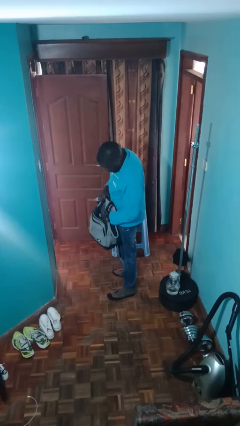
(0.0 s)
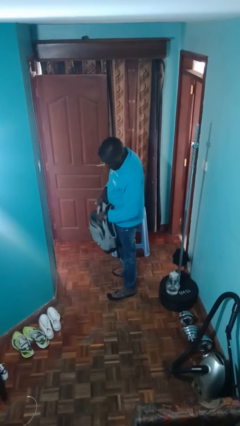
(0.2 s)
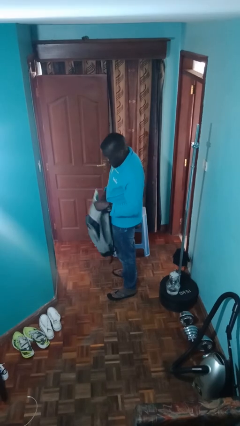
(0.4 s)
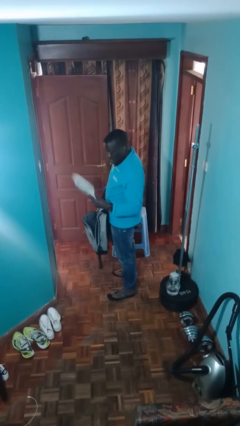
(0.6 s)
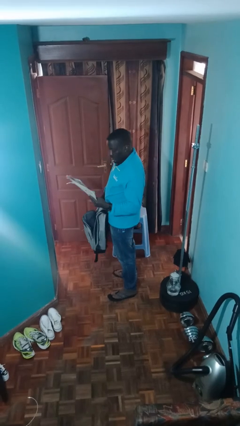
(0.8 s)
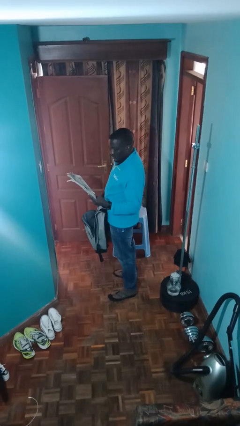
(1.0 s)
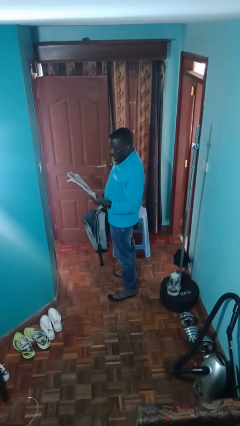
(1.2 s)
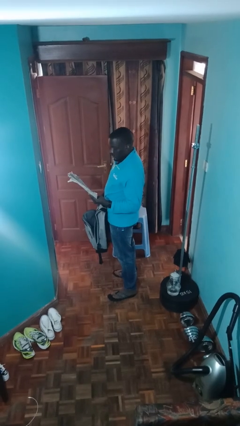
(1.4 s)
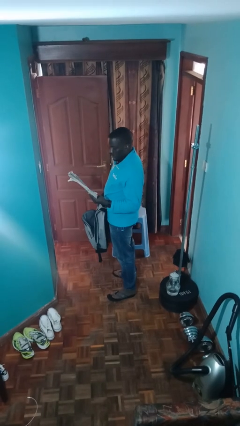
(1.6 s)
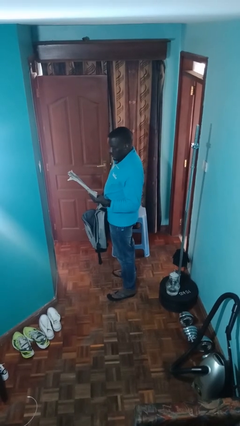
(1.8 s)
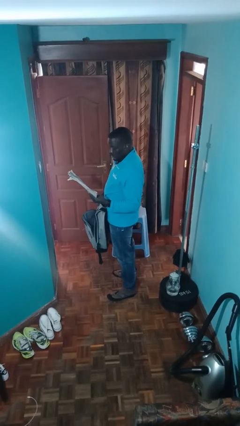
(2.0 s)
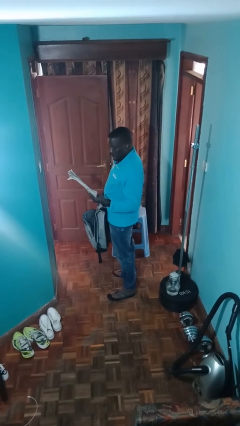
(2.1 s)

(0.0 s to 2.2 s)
person takes object from backpack

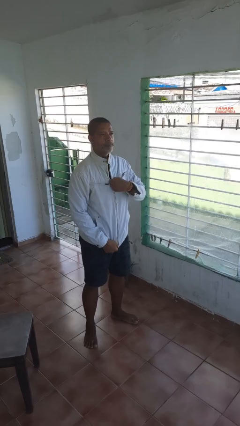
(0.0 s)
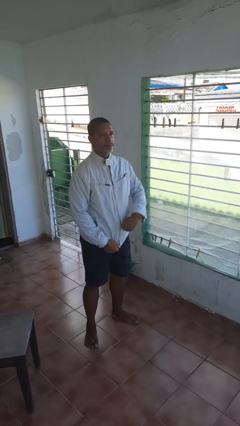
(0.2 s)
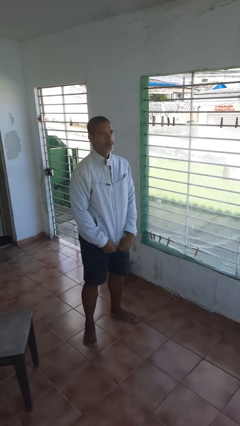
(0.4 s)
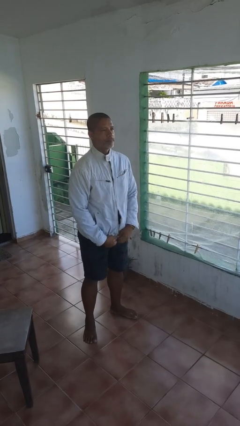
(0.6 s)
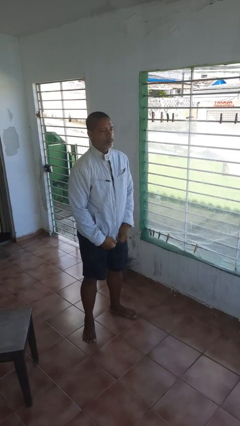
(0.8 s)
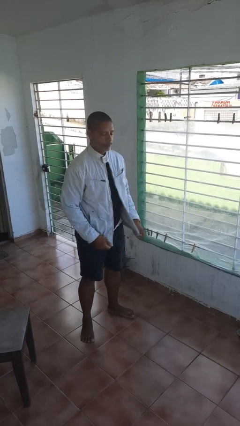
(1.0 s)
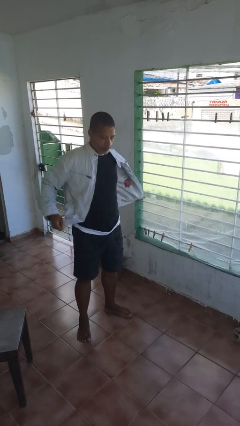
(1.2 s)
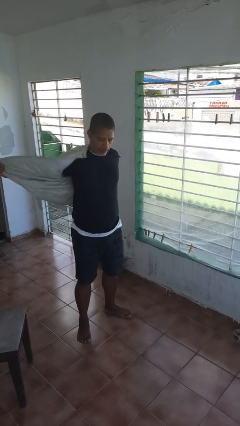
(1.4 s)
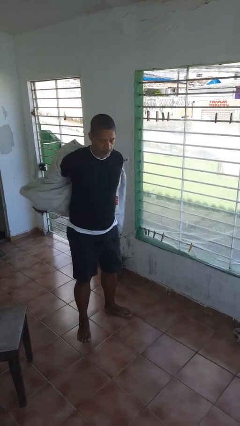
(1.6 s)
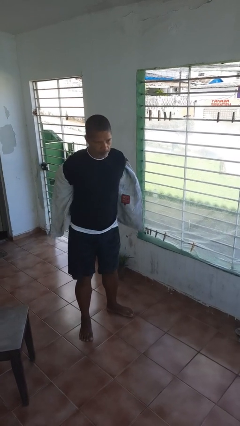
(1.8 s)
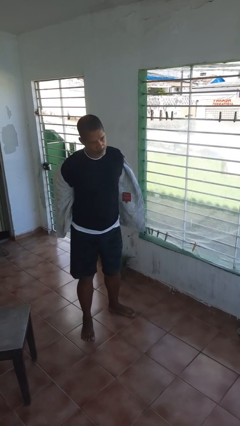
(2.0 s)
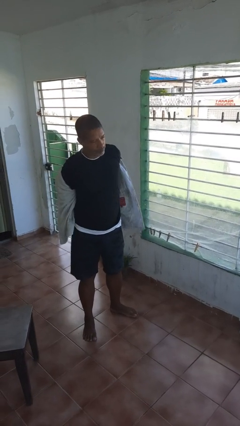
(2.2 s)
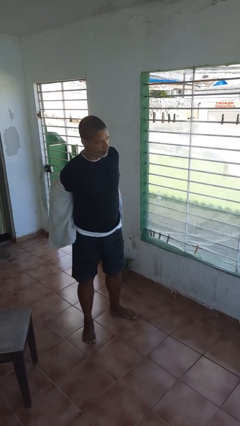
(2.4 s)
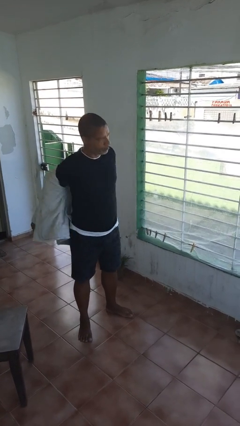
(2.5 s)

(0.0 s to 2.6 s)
person unzips jacket

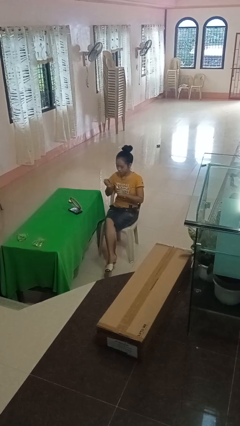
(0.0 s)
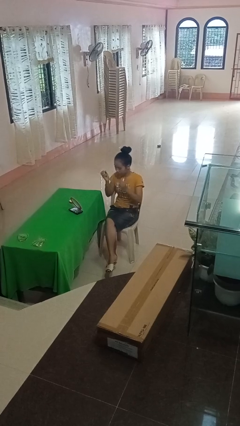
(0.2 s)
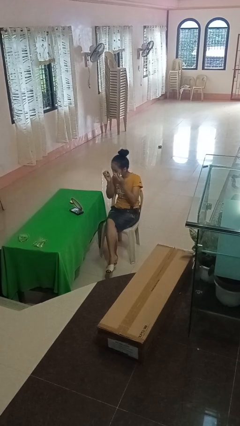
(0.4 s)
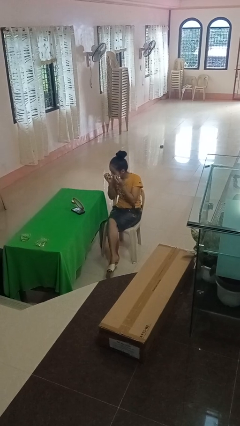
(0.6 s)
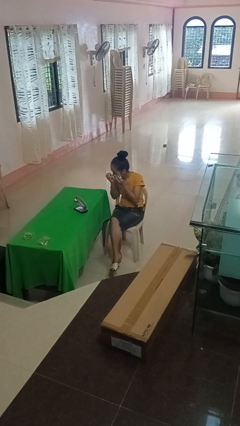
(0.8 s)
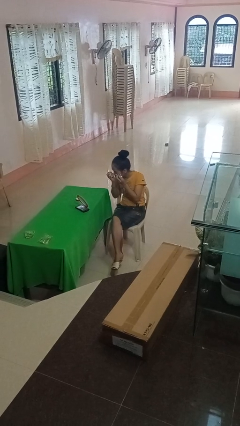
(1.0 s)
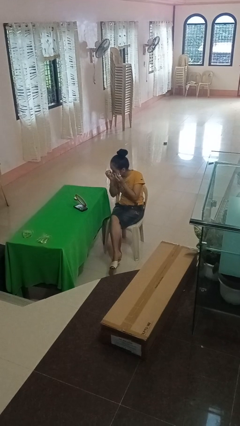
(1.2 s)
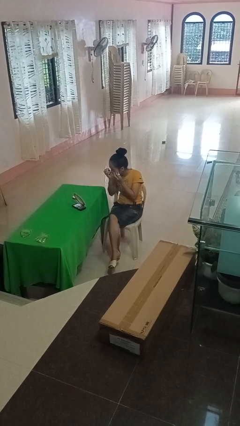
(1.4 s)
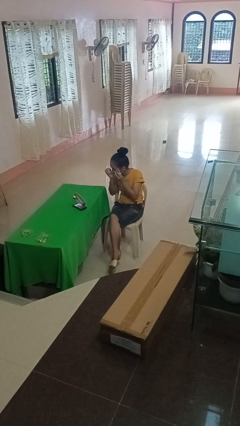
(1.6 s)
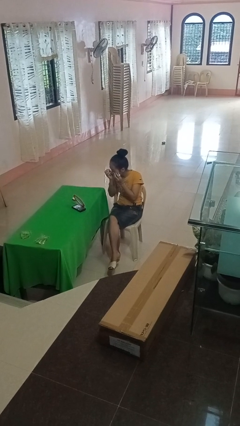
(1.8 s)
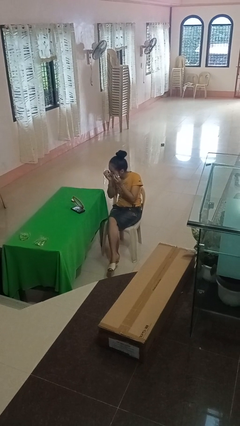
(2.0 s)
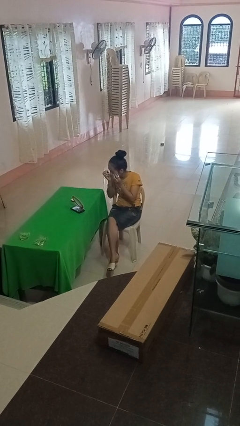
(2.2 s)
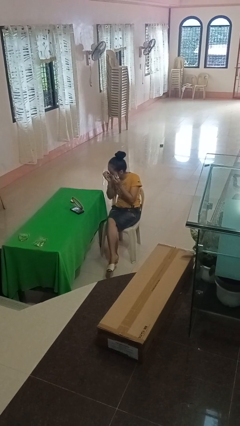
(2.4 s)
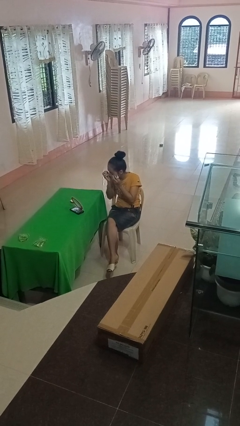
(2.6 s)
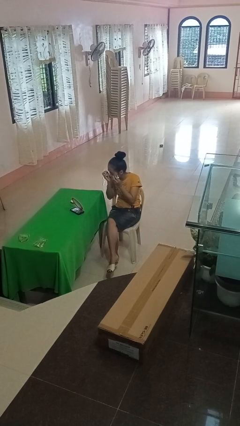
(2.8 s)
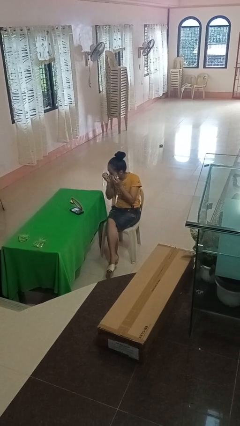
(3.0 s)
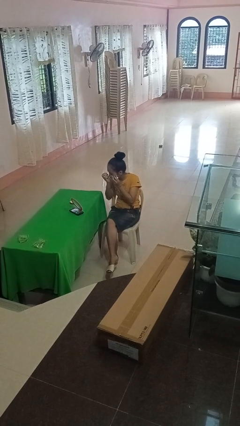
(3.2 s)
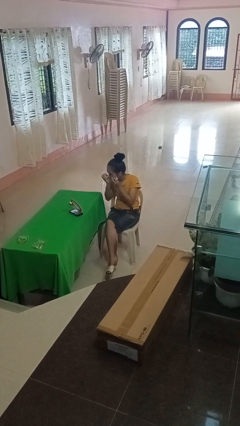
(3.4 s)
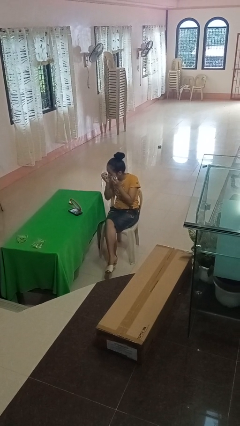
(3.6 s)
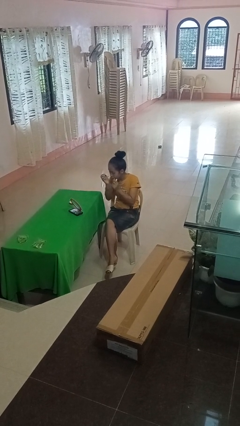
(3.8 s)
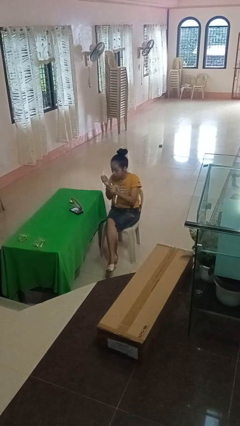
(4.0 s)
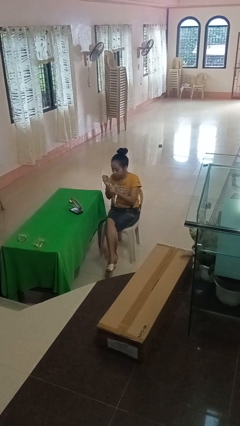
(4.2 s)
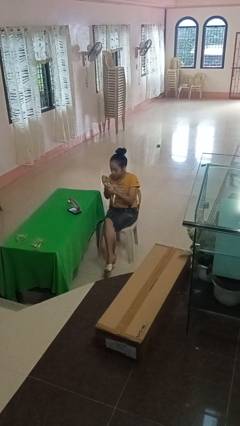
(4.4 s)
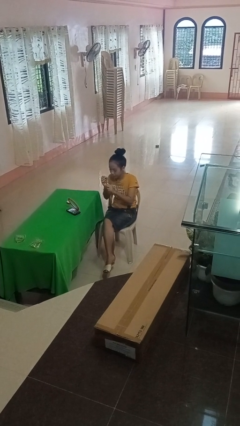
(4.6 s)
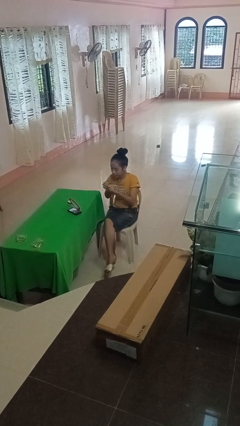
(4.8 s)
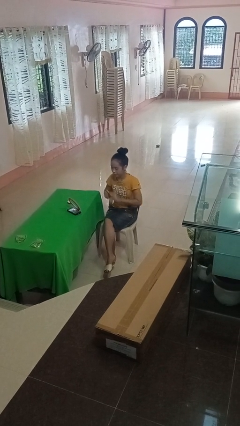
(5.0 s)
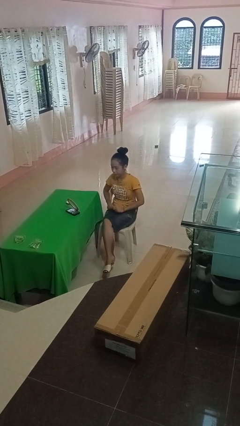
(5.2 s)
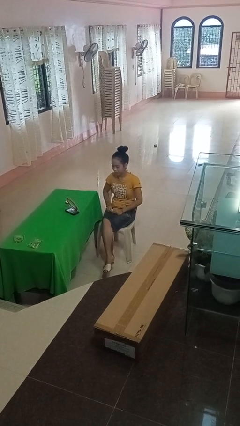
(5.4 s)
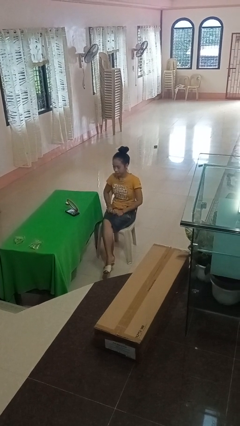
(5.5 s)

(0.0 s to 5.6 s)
person applies eye makeup

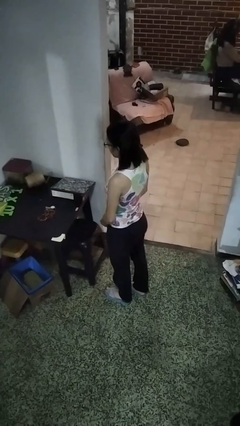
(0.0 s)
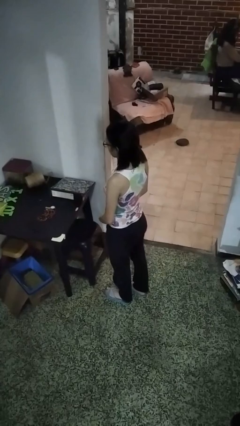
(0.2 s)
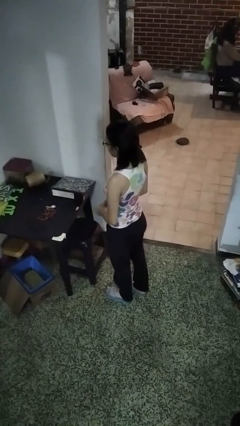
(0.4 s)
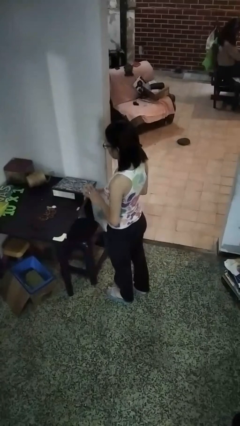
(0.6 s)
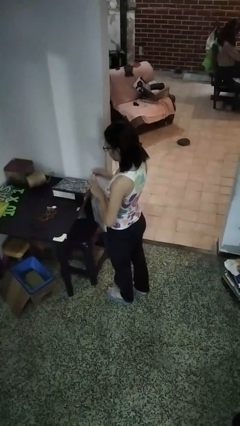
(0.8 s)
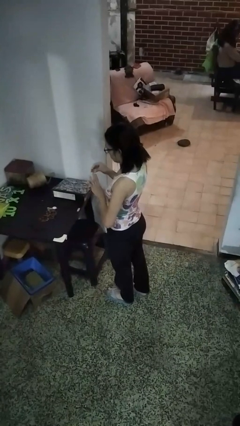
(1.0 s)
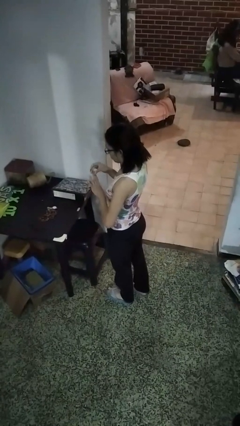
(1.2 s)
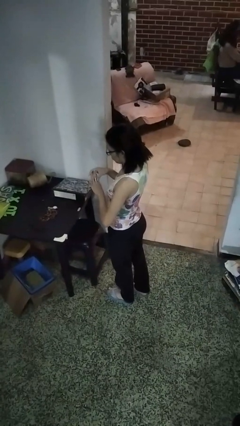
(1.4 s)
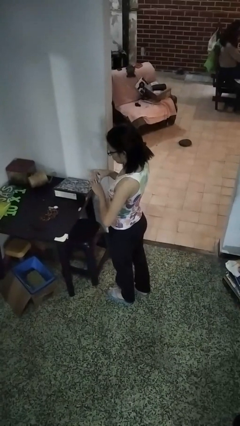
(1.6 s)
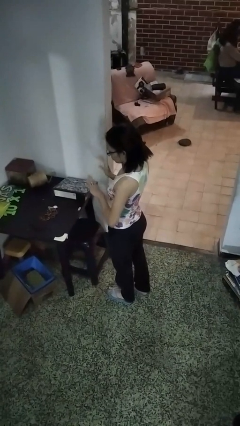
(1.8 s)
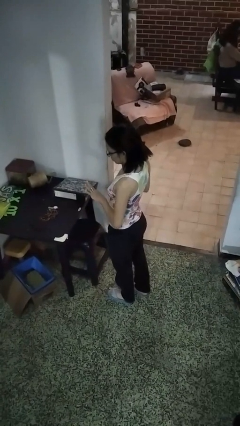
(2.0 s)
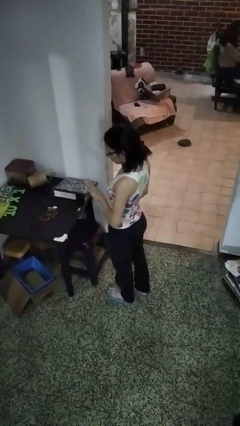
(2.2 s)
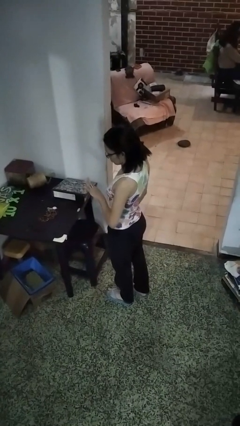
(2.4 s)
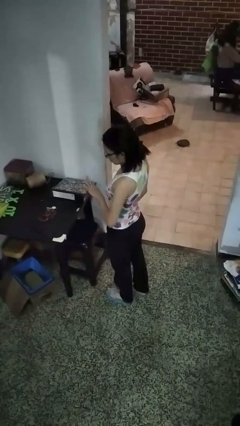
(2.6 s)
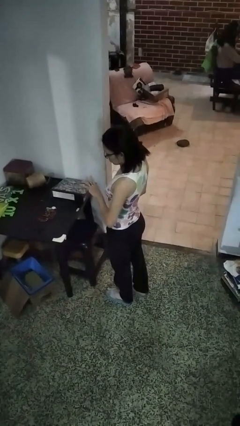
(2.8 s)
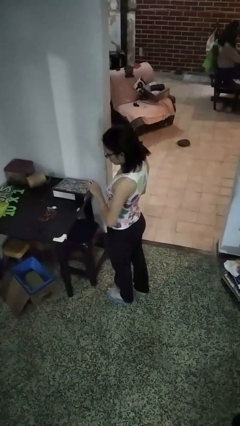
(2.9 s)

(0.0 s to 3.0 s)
person puts on ring

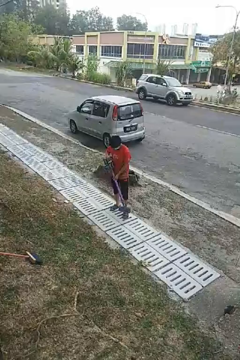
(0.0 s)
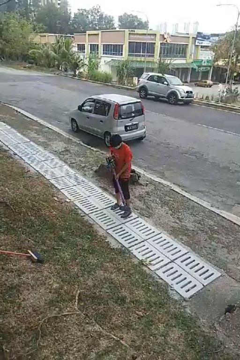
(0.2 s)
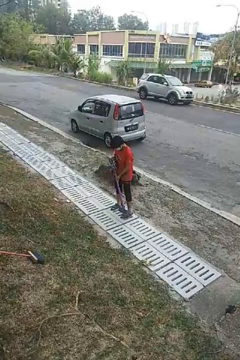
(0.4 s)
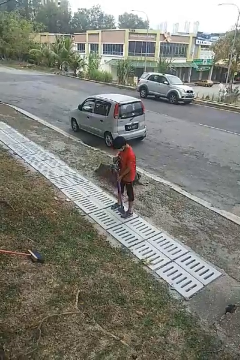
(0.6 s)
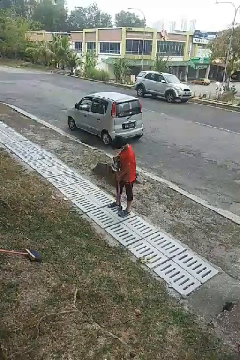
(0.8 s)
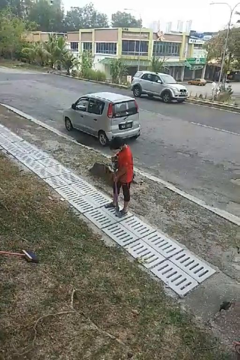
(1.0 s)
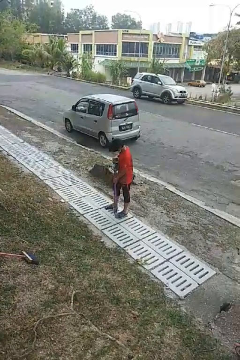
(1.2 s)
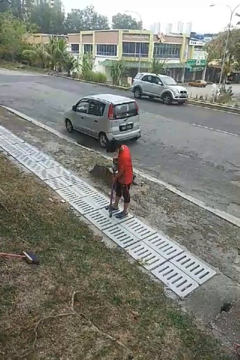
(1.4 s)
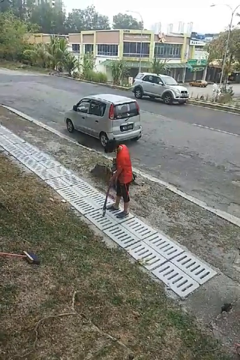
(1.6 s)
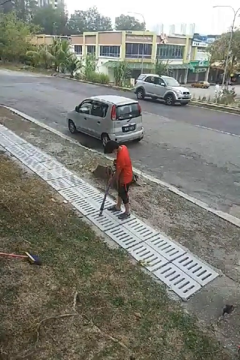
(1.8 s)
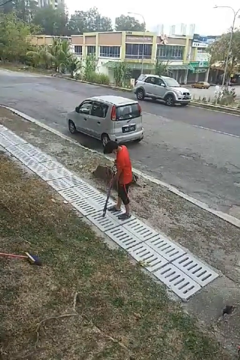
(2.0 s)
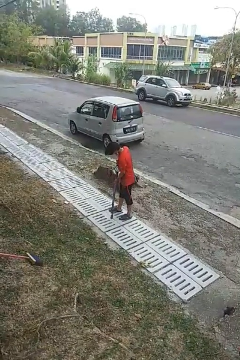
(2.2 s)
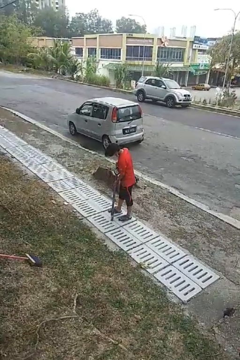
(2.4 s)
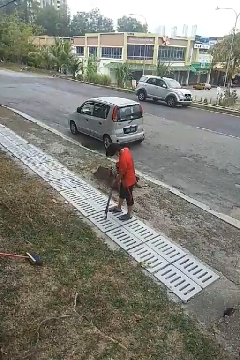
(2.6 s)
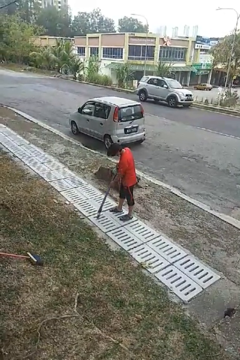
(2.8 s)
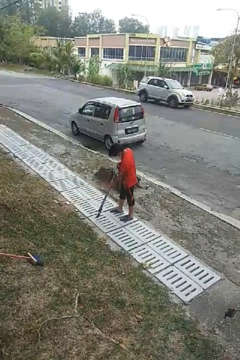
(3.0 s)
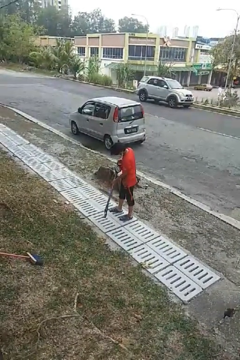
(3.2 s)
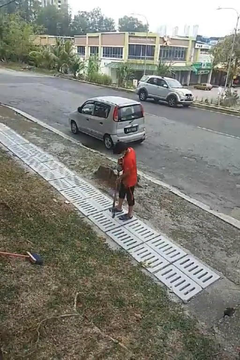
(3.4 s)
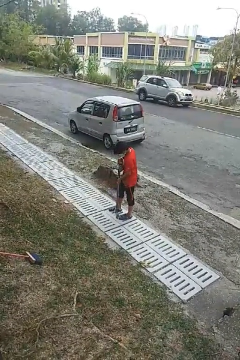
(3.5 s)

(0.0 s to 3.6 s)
person vacuums carpet

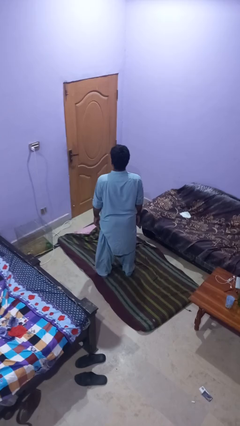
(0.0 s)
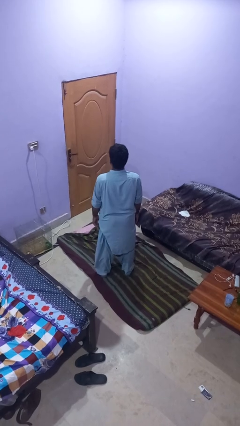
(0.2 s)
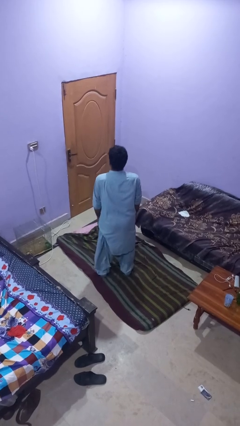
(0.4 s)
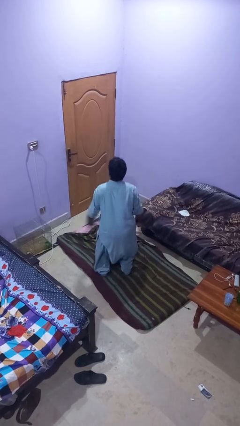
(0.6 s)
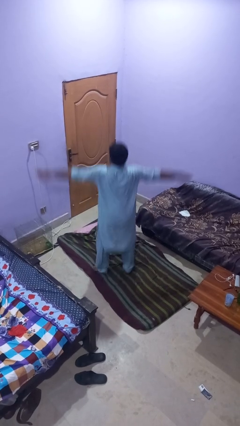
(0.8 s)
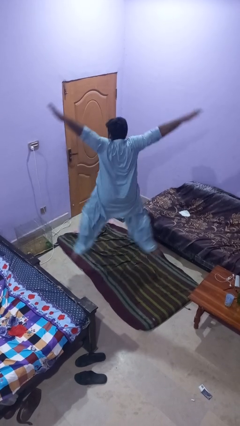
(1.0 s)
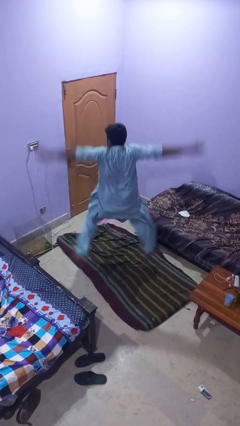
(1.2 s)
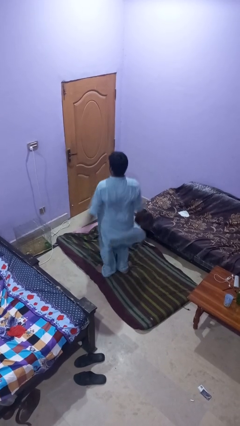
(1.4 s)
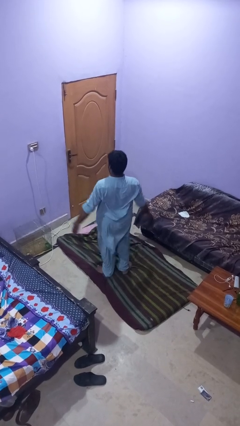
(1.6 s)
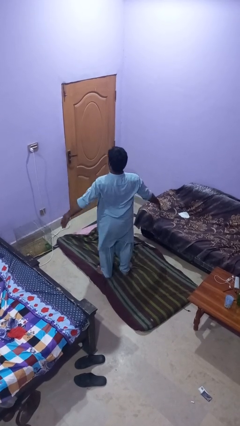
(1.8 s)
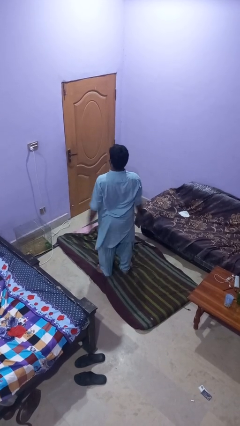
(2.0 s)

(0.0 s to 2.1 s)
person exercises with jumping jacks
